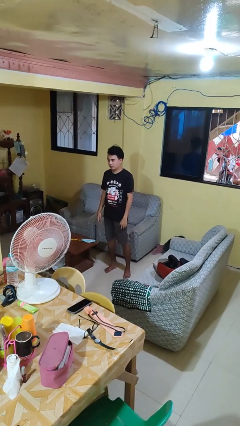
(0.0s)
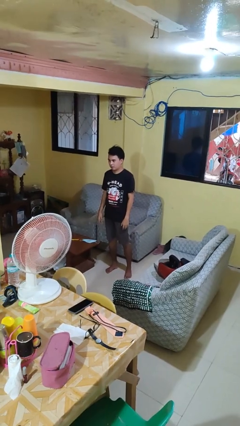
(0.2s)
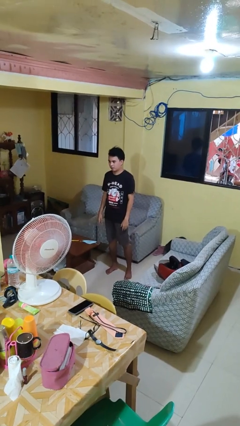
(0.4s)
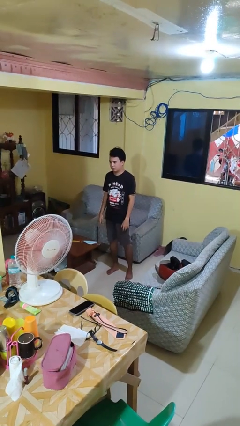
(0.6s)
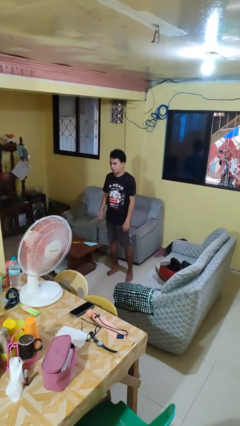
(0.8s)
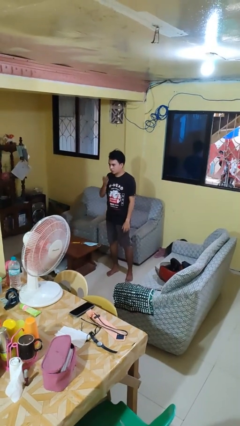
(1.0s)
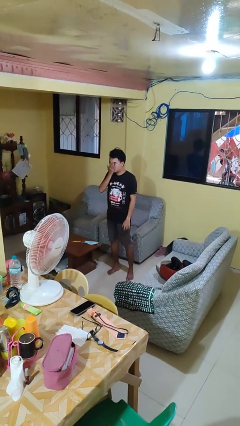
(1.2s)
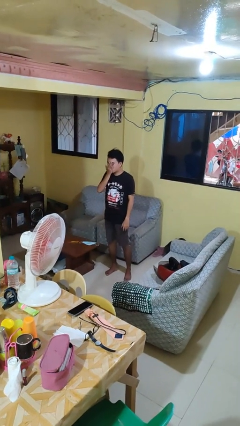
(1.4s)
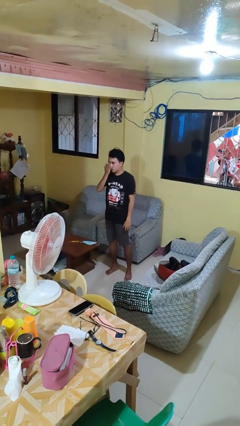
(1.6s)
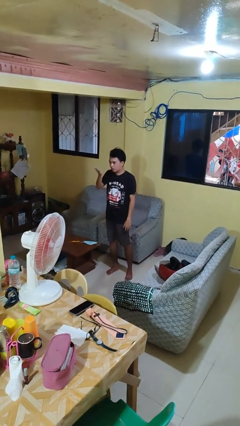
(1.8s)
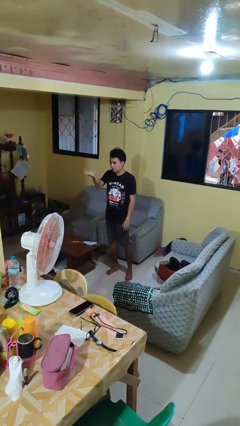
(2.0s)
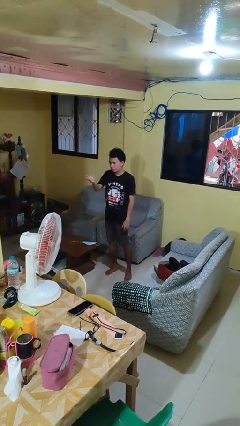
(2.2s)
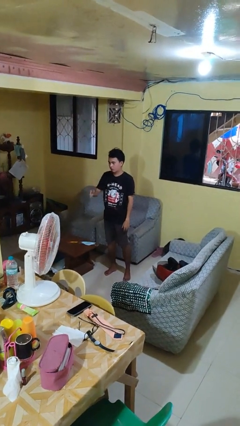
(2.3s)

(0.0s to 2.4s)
person gestures blow kiss

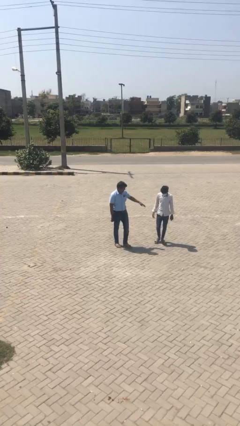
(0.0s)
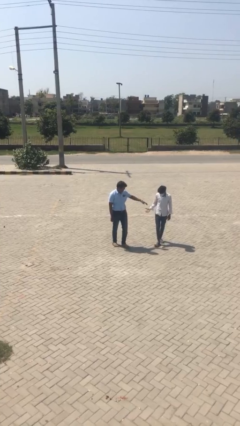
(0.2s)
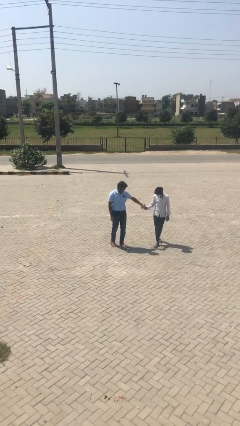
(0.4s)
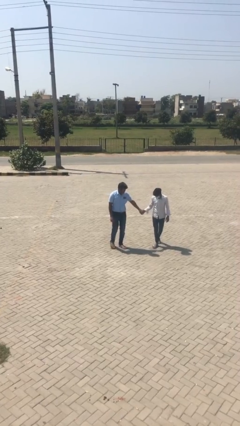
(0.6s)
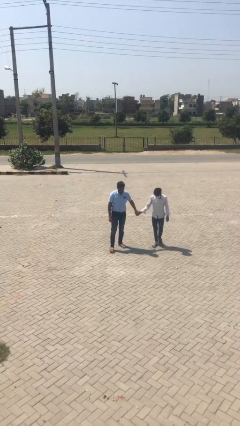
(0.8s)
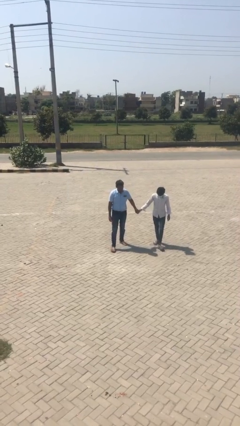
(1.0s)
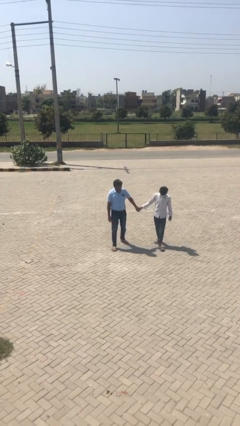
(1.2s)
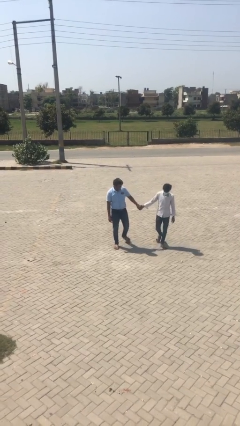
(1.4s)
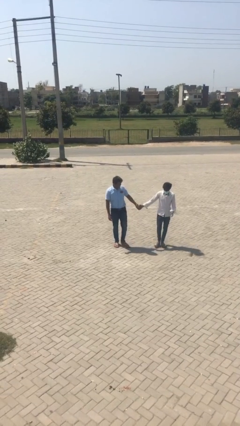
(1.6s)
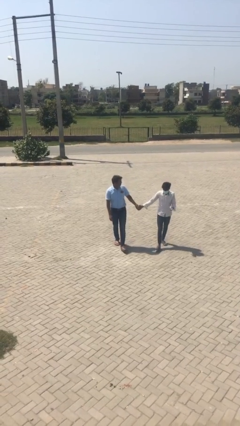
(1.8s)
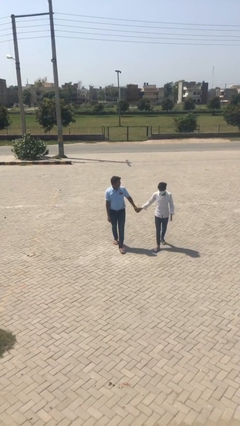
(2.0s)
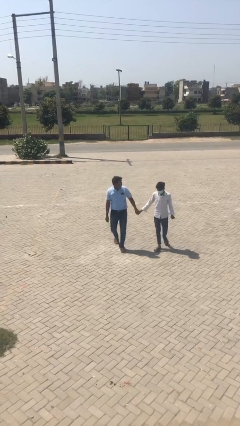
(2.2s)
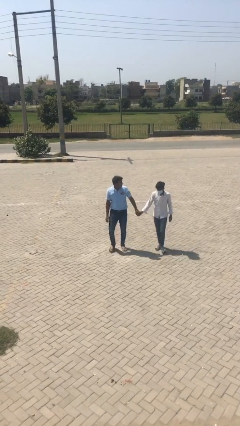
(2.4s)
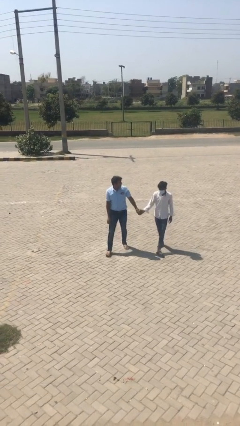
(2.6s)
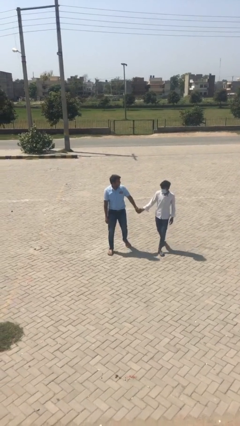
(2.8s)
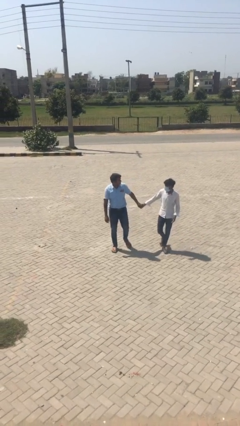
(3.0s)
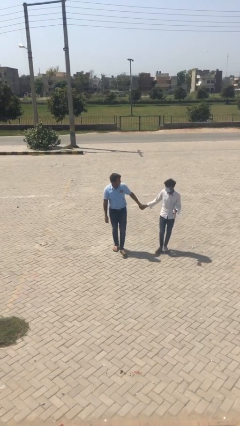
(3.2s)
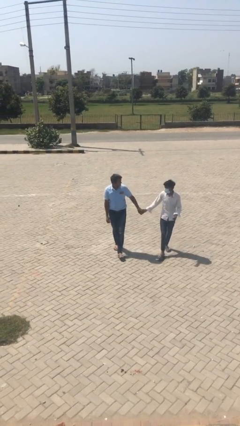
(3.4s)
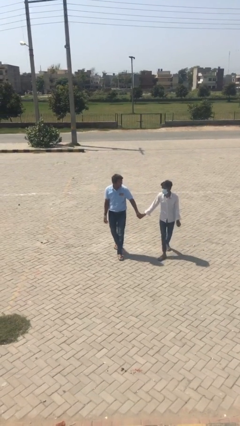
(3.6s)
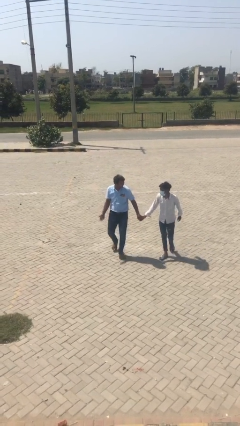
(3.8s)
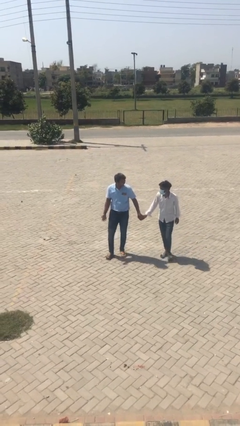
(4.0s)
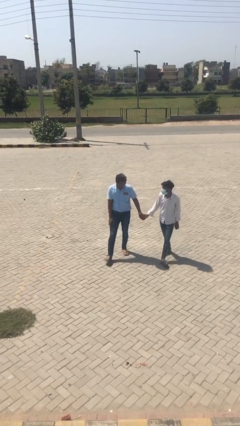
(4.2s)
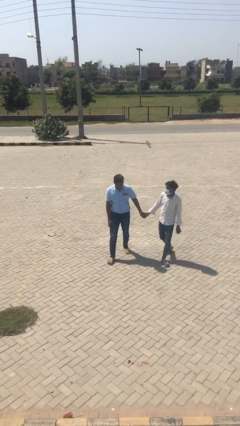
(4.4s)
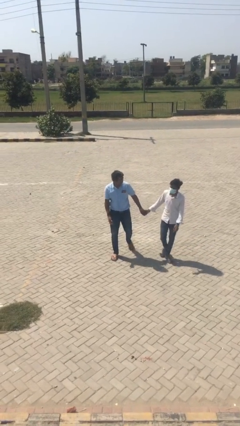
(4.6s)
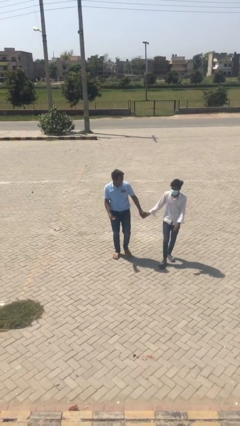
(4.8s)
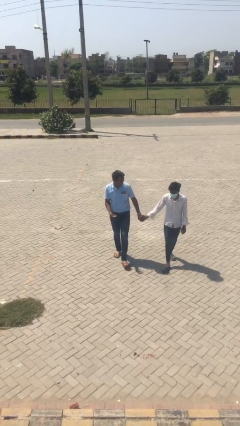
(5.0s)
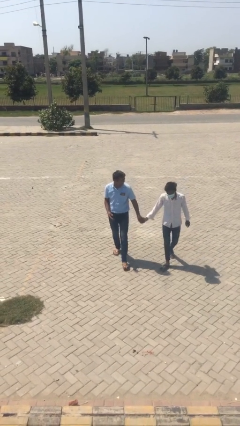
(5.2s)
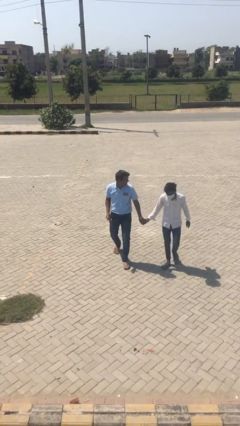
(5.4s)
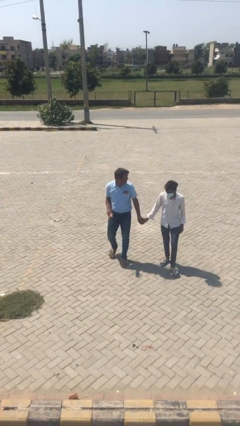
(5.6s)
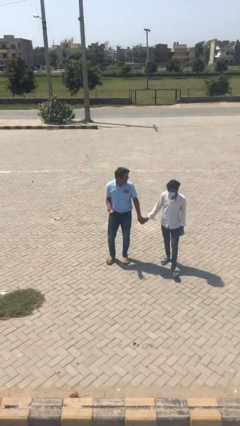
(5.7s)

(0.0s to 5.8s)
person holds hand

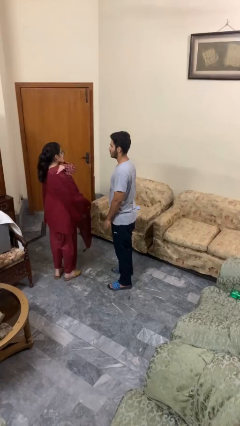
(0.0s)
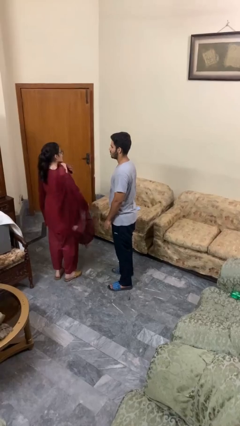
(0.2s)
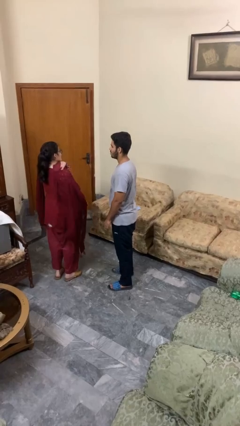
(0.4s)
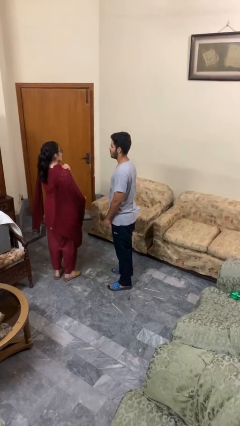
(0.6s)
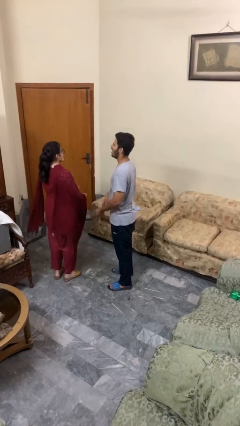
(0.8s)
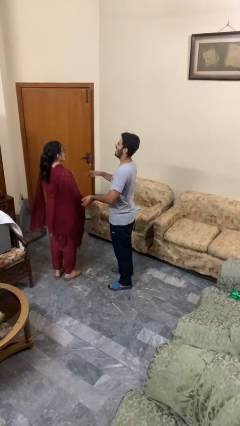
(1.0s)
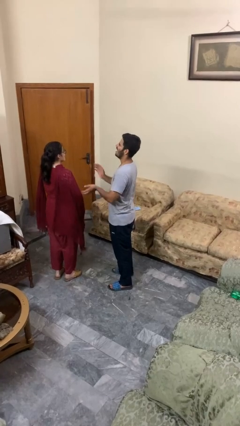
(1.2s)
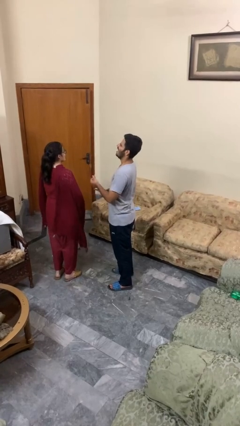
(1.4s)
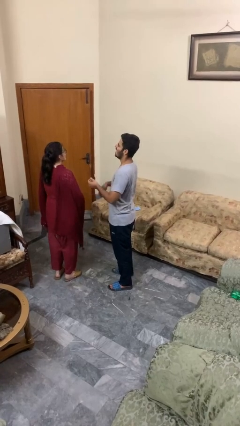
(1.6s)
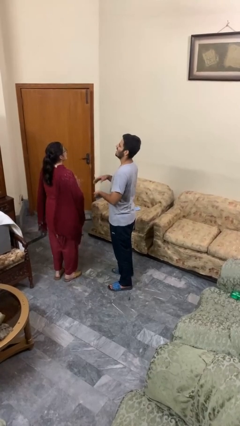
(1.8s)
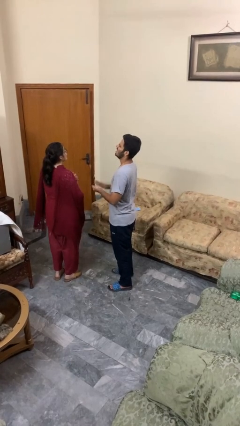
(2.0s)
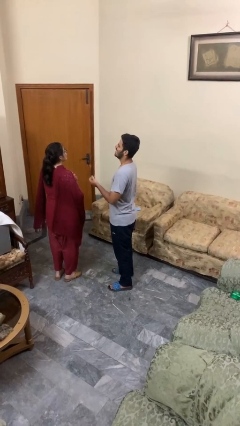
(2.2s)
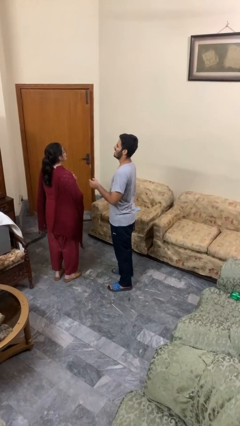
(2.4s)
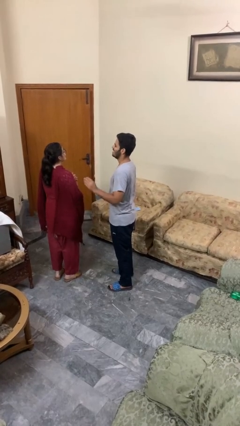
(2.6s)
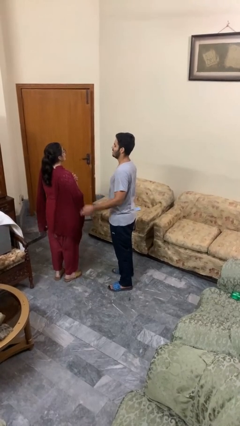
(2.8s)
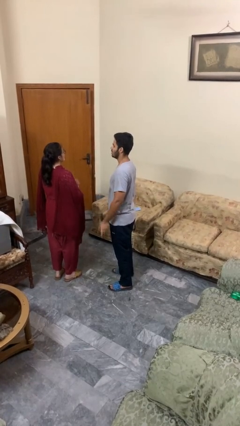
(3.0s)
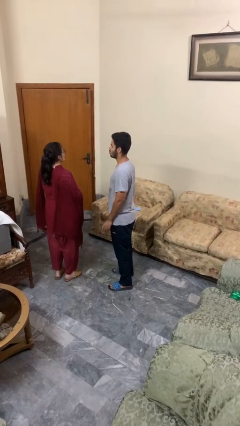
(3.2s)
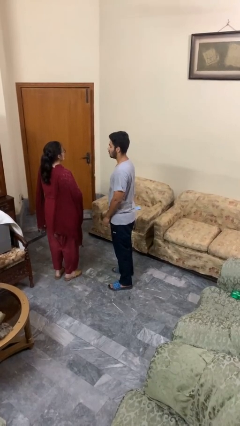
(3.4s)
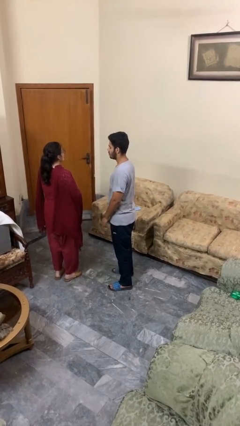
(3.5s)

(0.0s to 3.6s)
person laughs with person

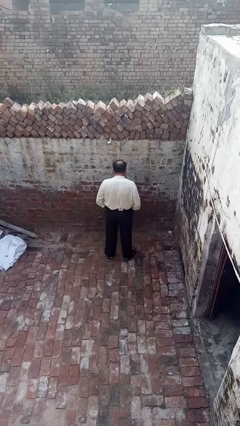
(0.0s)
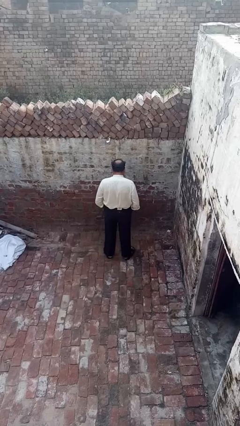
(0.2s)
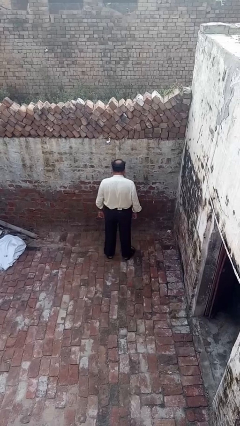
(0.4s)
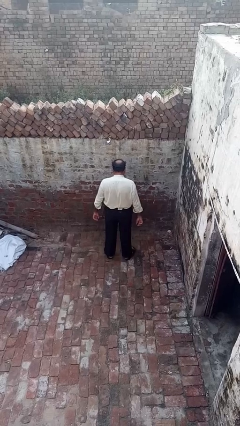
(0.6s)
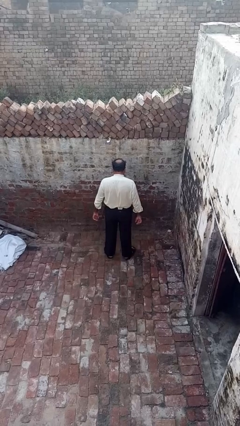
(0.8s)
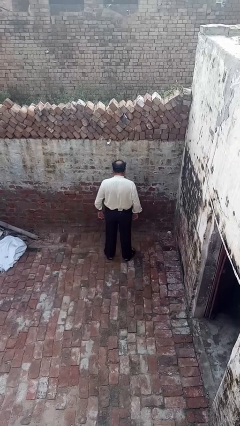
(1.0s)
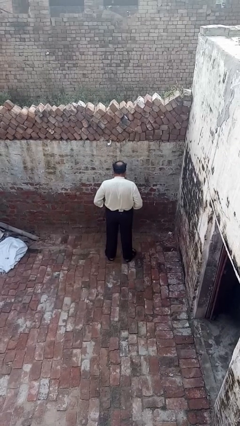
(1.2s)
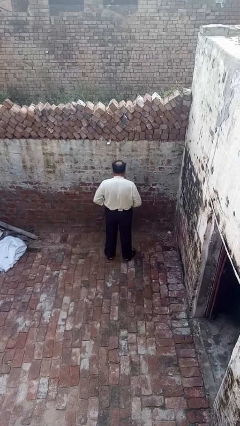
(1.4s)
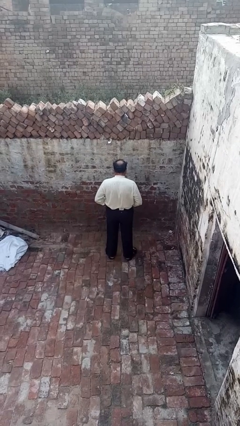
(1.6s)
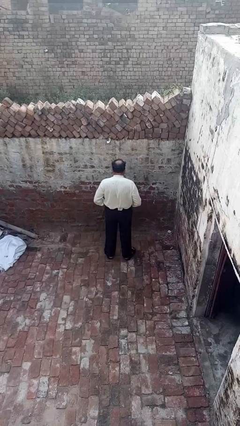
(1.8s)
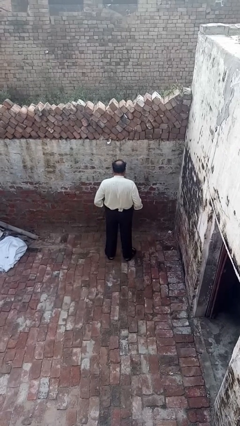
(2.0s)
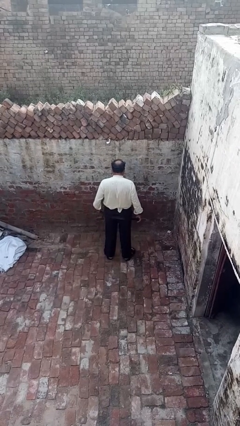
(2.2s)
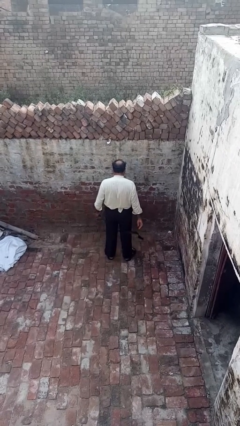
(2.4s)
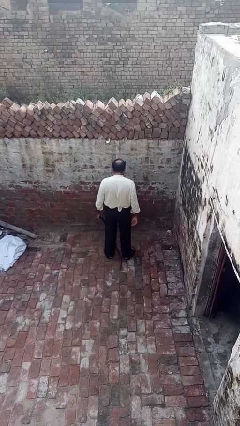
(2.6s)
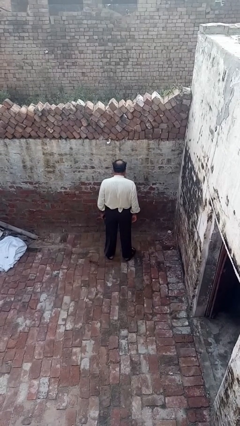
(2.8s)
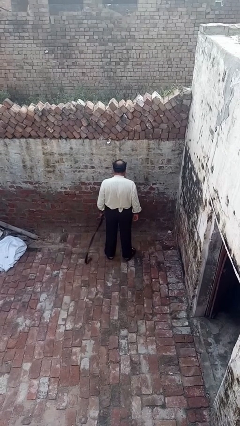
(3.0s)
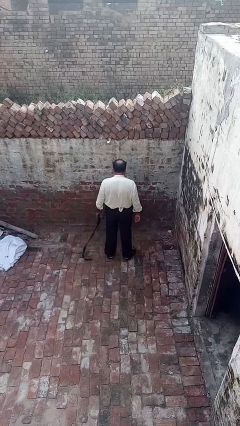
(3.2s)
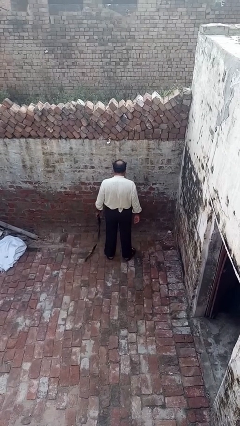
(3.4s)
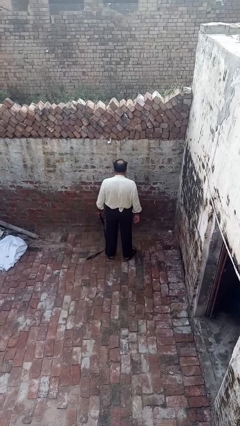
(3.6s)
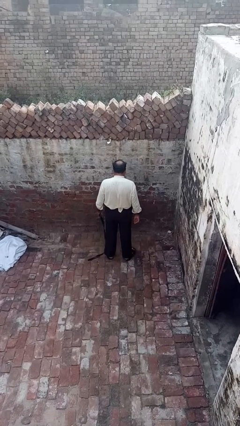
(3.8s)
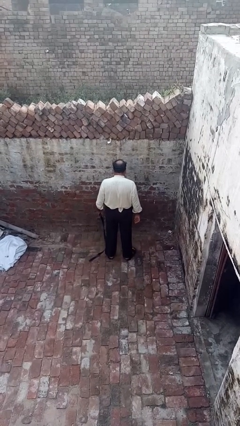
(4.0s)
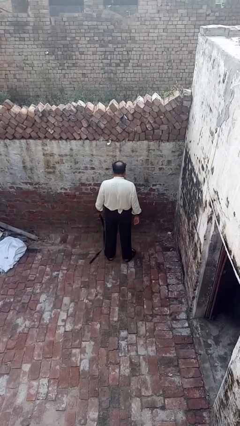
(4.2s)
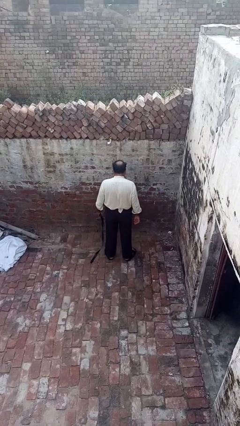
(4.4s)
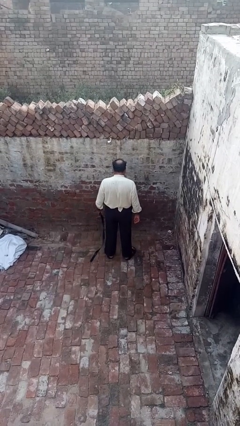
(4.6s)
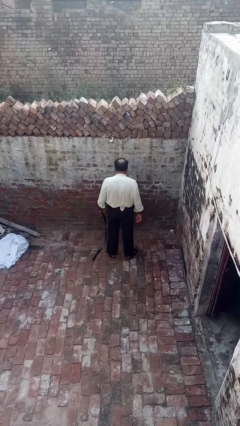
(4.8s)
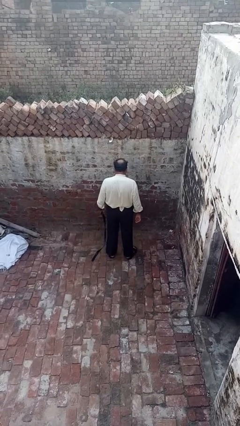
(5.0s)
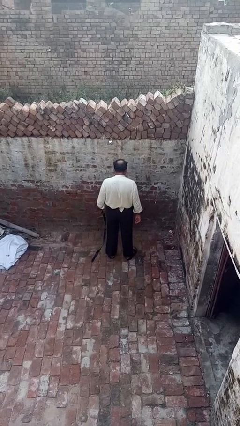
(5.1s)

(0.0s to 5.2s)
person takes off belt

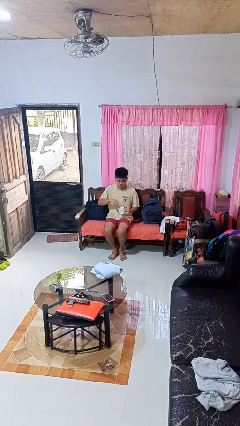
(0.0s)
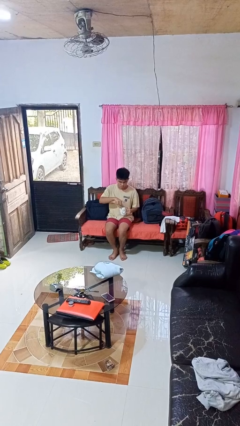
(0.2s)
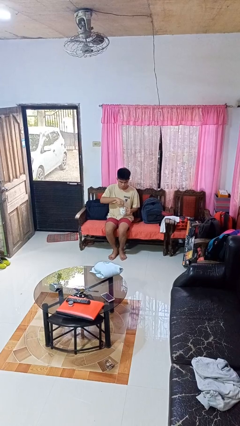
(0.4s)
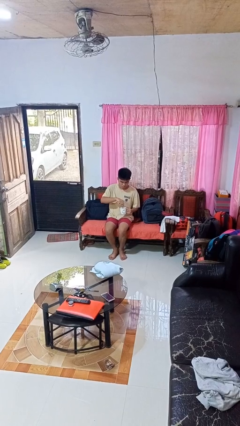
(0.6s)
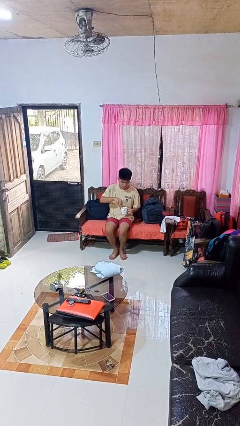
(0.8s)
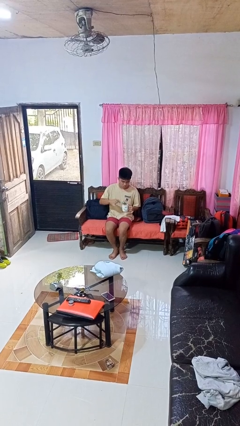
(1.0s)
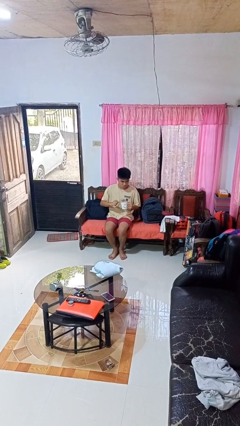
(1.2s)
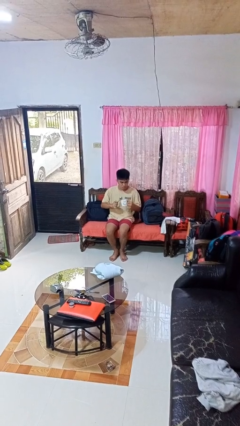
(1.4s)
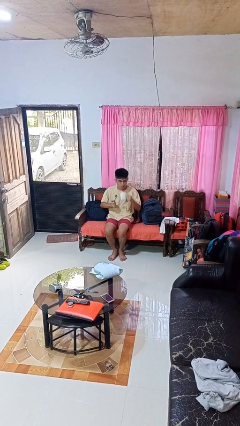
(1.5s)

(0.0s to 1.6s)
person stirs mug
